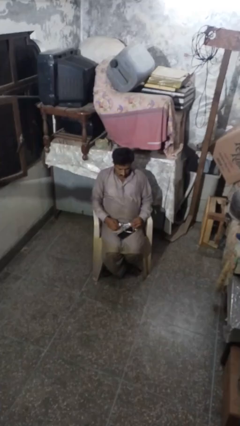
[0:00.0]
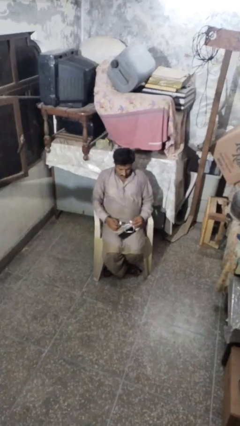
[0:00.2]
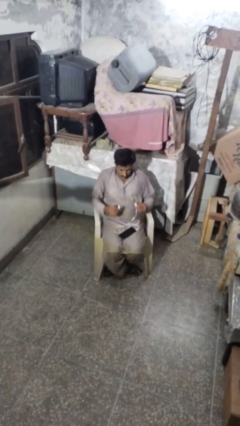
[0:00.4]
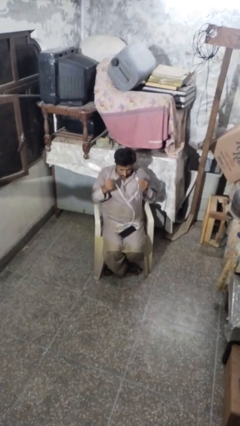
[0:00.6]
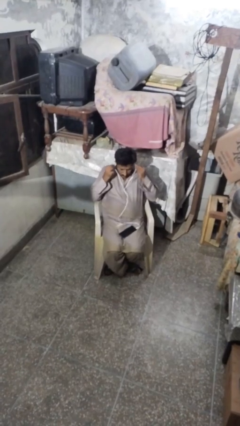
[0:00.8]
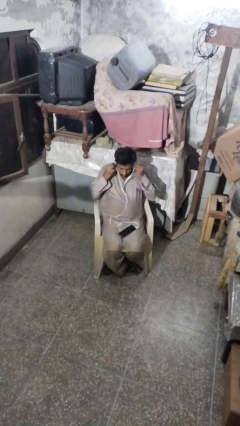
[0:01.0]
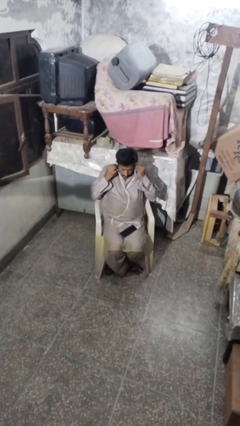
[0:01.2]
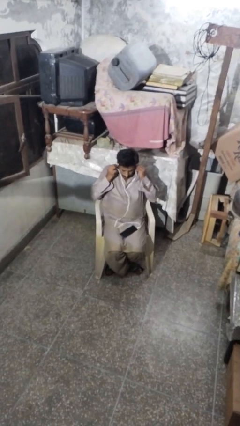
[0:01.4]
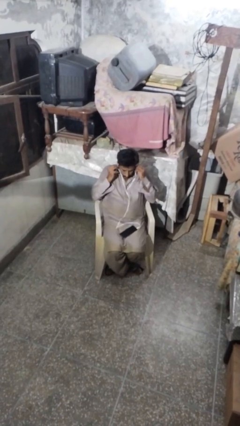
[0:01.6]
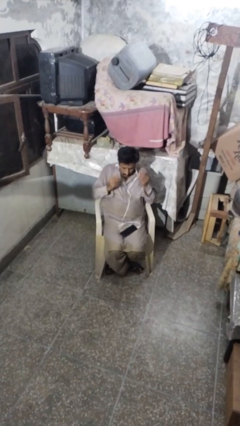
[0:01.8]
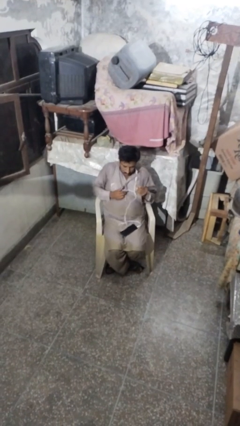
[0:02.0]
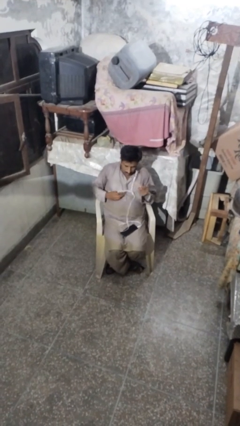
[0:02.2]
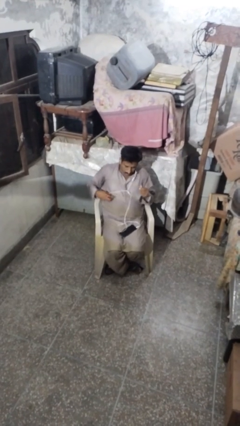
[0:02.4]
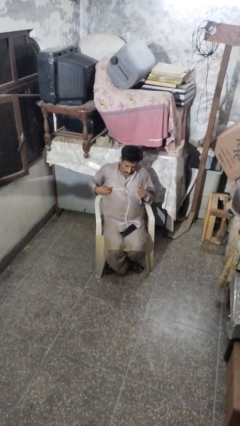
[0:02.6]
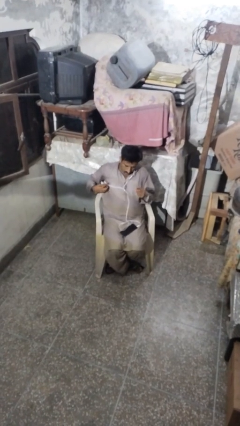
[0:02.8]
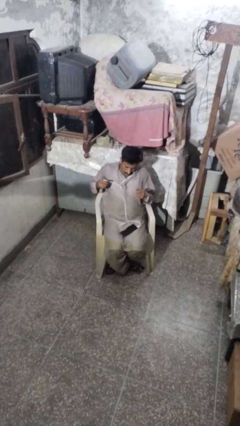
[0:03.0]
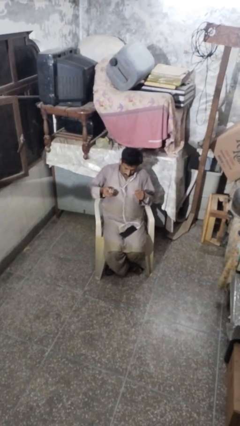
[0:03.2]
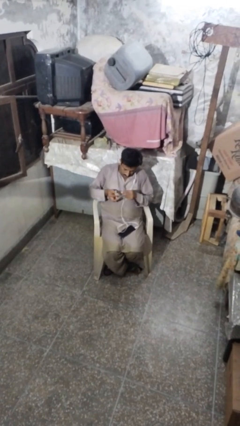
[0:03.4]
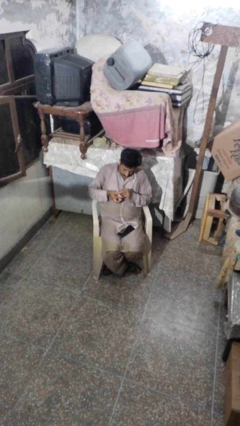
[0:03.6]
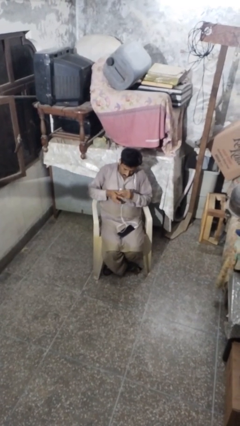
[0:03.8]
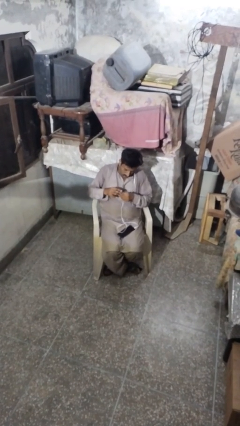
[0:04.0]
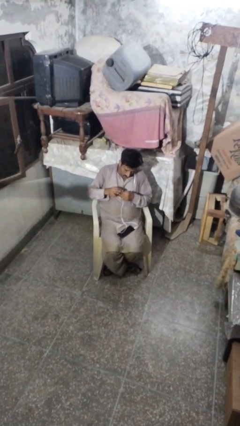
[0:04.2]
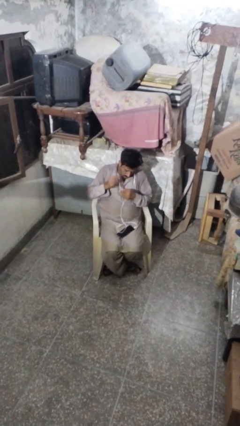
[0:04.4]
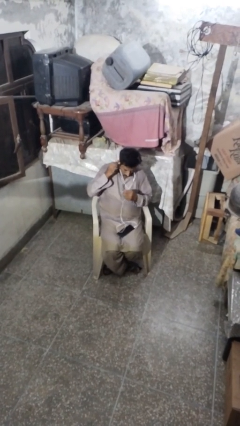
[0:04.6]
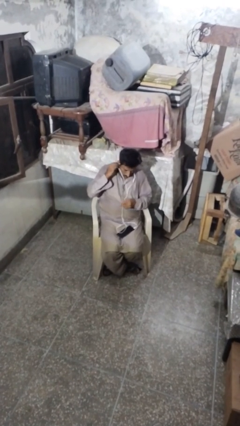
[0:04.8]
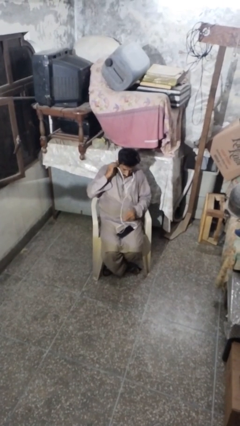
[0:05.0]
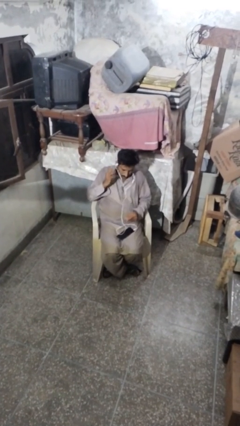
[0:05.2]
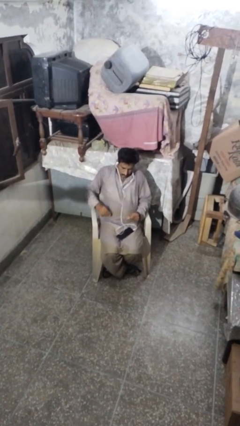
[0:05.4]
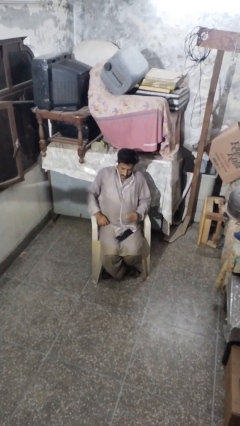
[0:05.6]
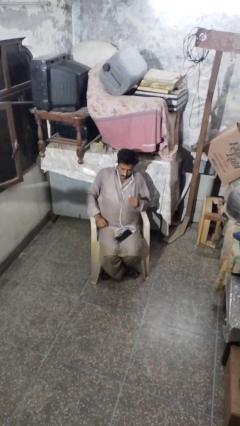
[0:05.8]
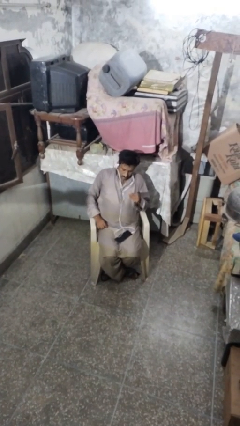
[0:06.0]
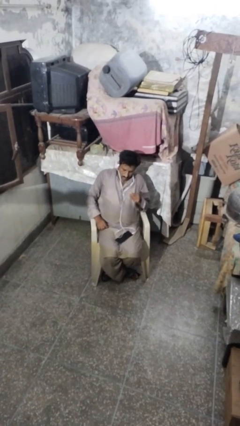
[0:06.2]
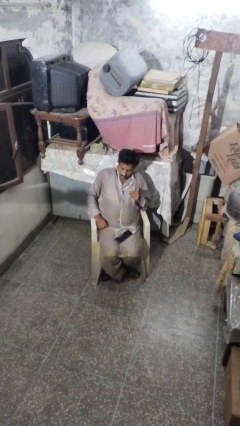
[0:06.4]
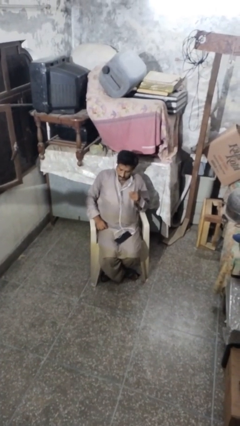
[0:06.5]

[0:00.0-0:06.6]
person puts on headphones

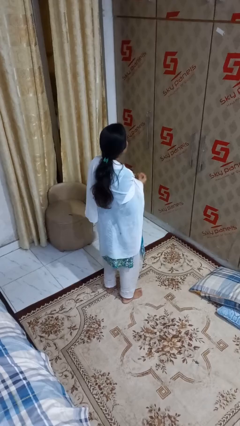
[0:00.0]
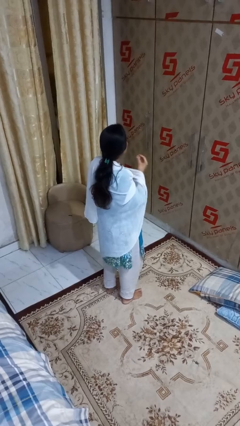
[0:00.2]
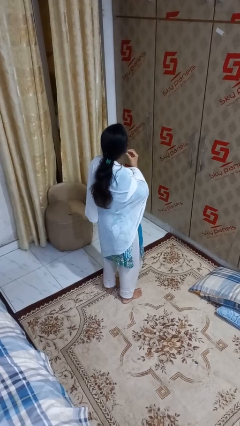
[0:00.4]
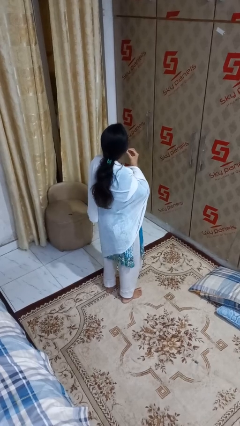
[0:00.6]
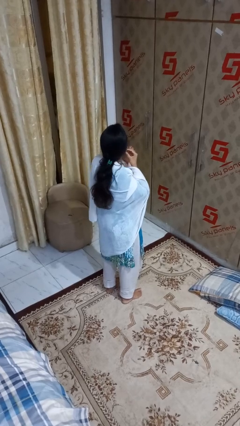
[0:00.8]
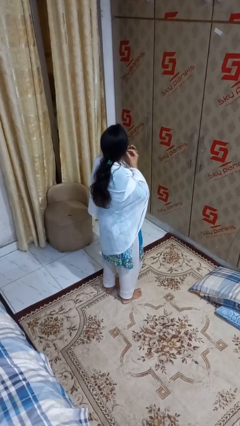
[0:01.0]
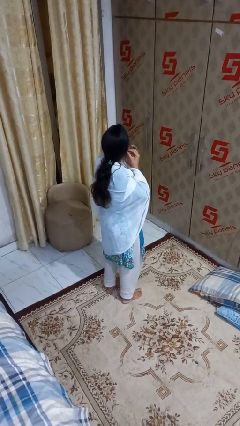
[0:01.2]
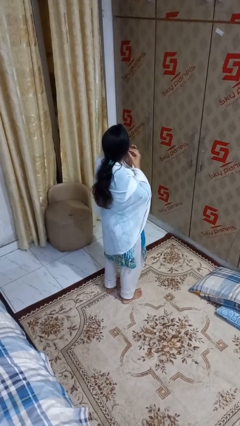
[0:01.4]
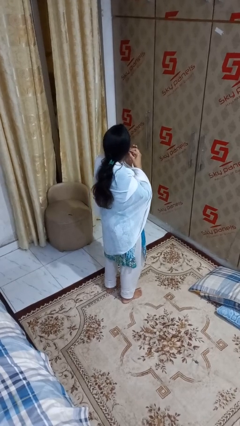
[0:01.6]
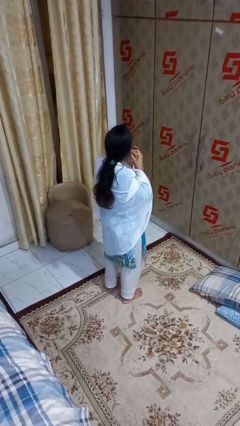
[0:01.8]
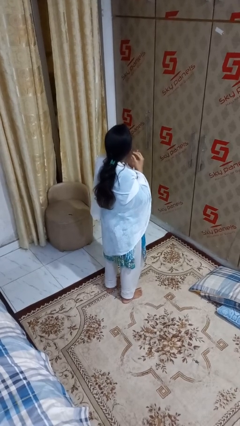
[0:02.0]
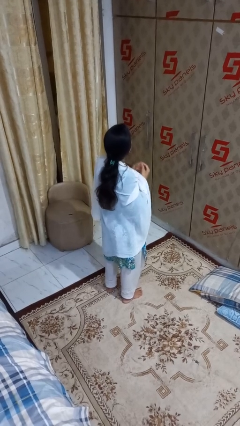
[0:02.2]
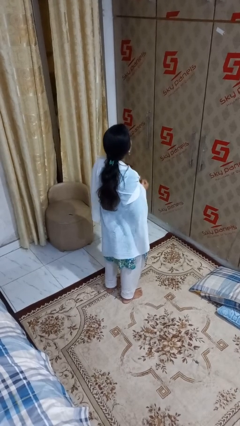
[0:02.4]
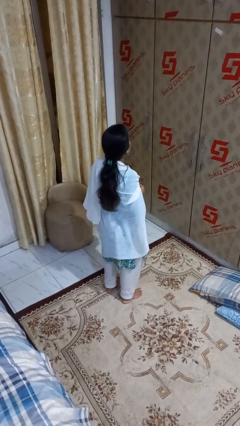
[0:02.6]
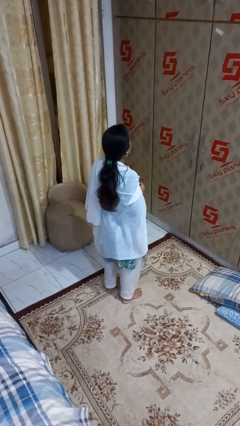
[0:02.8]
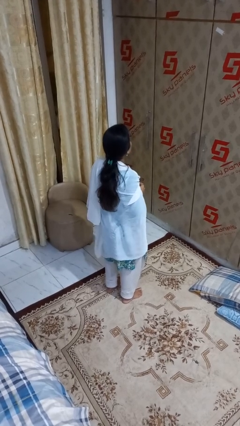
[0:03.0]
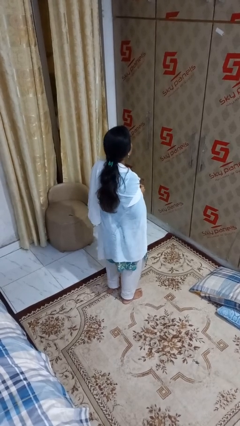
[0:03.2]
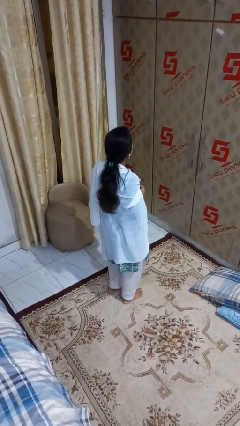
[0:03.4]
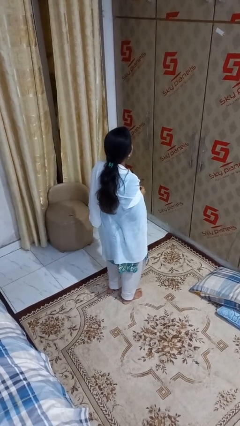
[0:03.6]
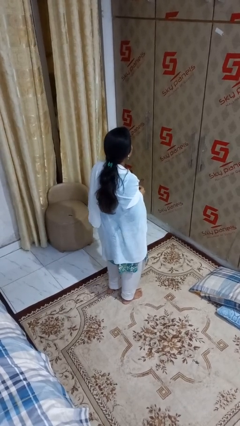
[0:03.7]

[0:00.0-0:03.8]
person puts on earrings

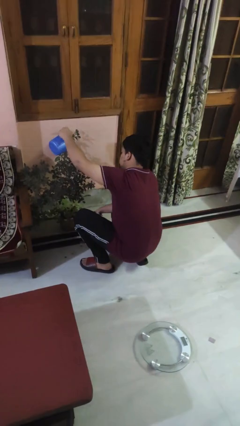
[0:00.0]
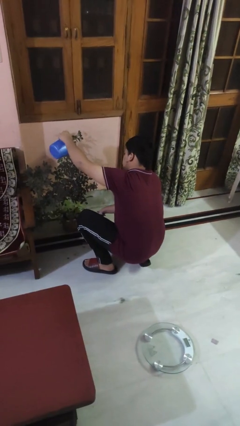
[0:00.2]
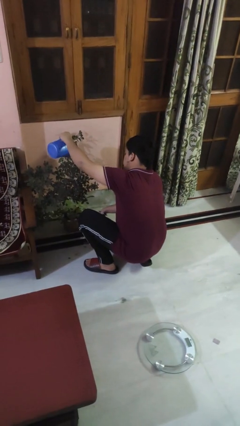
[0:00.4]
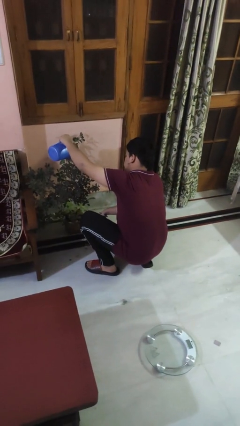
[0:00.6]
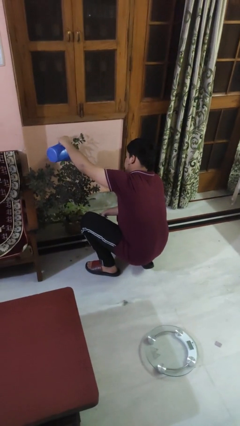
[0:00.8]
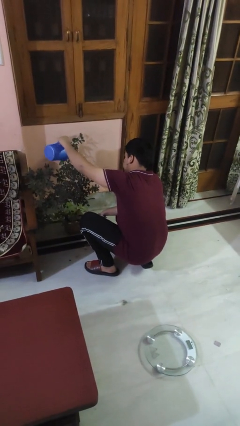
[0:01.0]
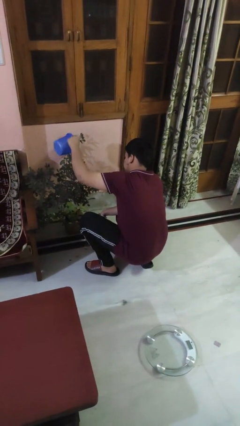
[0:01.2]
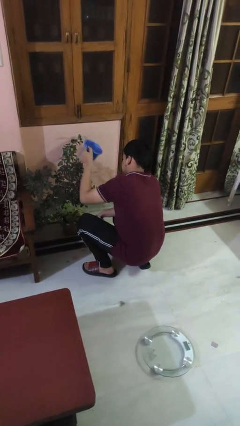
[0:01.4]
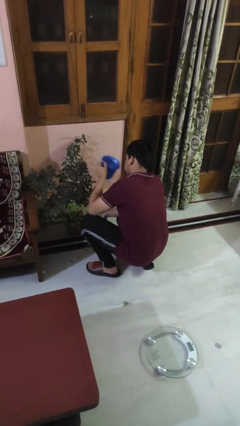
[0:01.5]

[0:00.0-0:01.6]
person waters houseplant

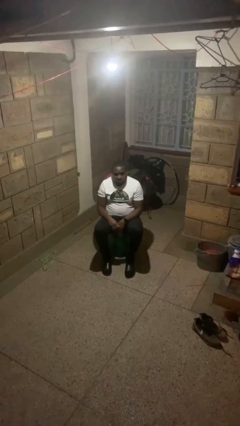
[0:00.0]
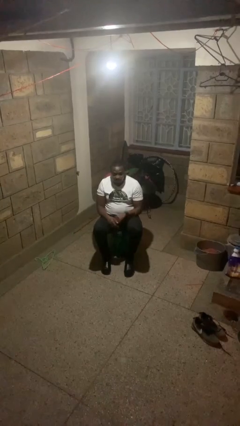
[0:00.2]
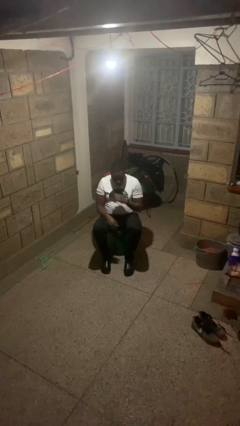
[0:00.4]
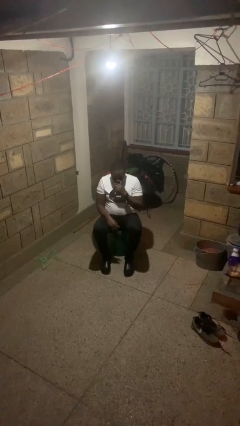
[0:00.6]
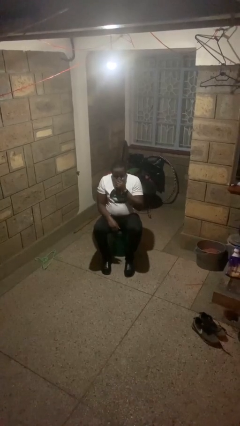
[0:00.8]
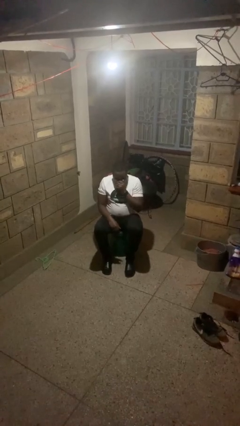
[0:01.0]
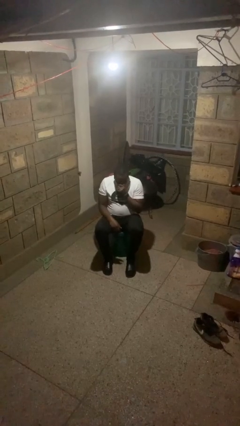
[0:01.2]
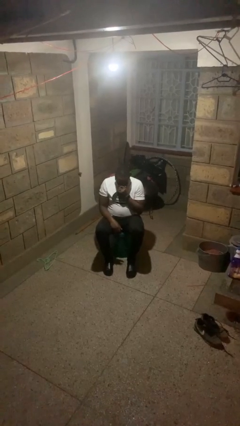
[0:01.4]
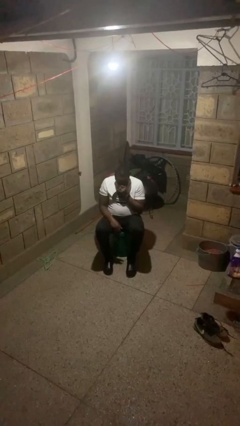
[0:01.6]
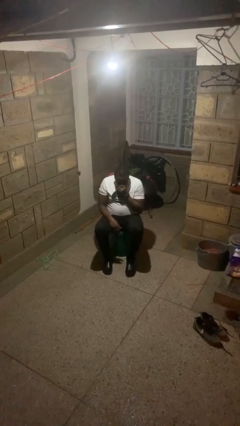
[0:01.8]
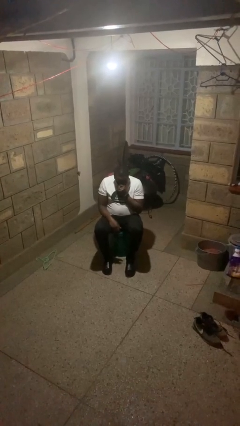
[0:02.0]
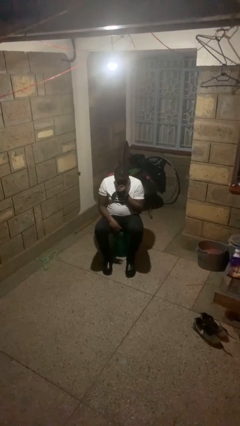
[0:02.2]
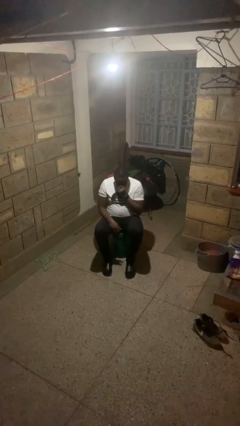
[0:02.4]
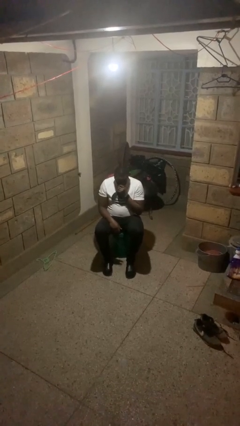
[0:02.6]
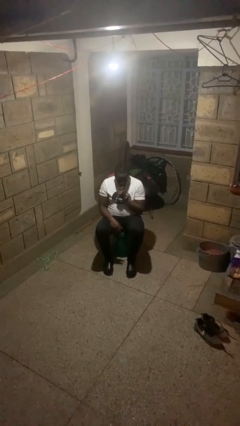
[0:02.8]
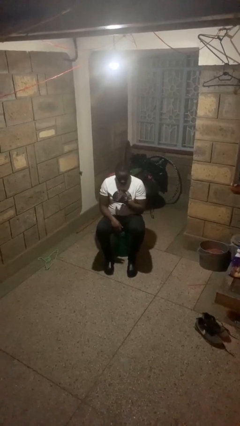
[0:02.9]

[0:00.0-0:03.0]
person sneezes into hand

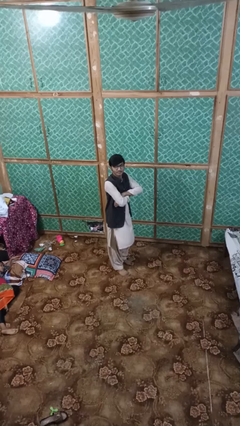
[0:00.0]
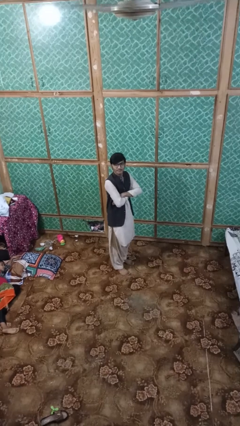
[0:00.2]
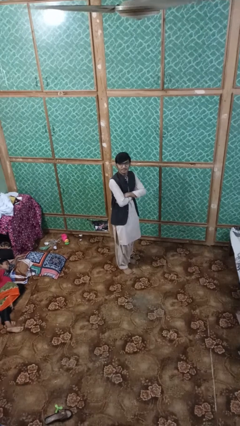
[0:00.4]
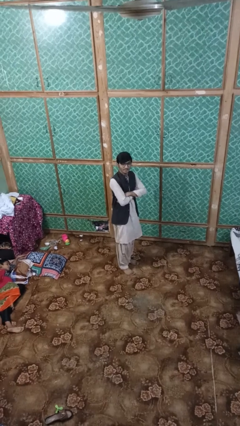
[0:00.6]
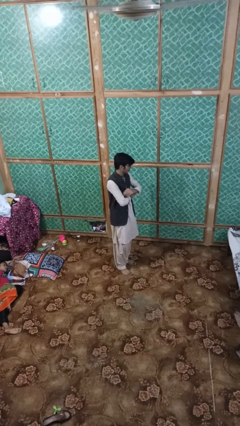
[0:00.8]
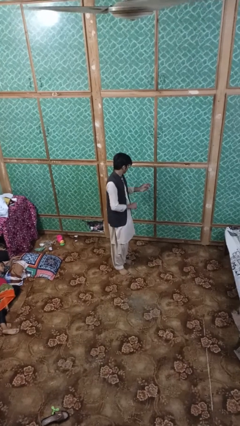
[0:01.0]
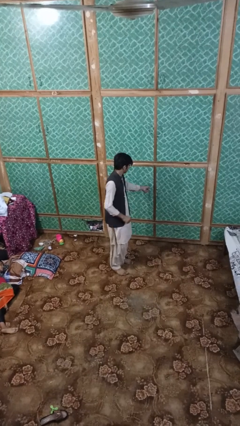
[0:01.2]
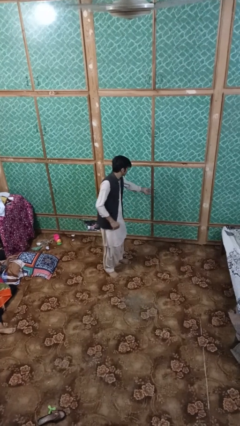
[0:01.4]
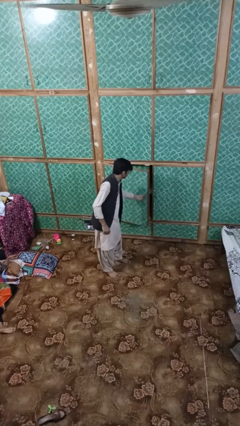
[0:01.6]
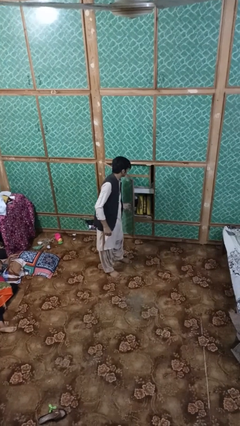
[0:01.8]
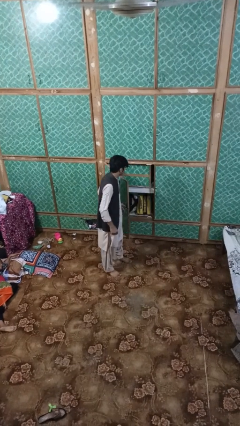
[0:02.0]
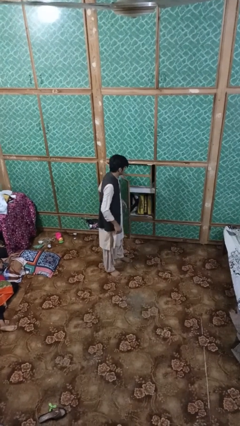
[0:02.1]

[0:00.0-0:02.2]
person opens dresser drawer

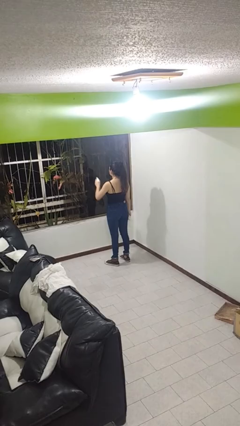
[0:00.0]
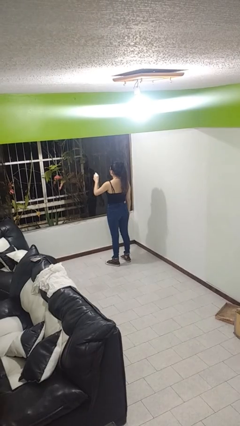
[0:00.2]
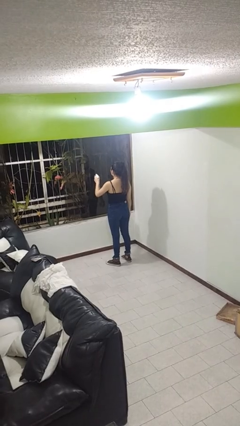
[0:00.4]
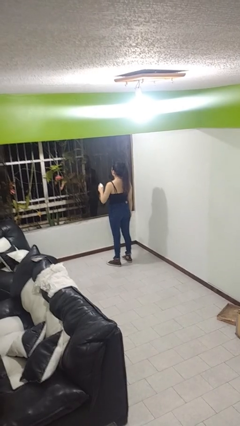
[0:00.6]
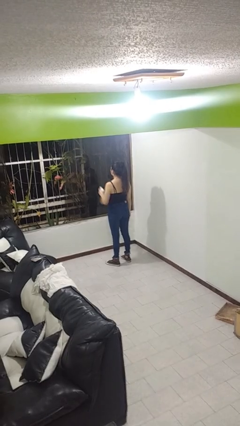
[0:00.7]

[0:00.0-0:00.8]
person sprays from bottle
